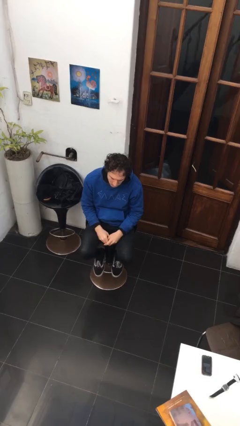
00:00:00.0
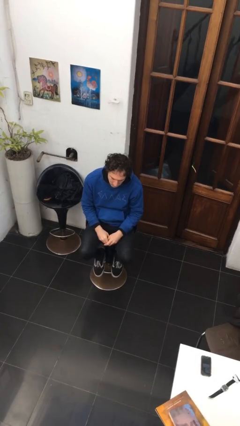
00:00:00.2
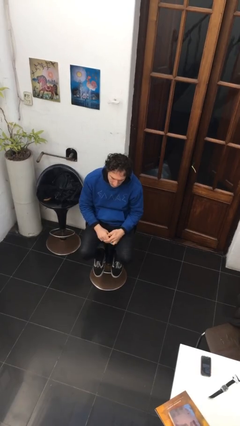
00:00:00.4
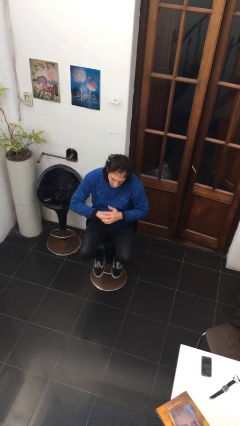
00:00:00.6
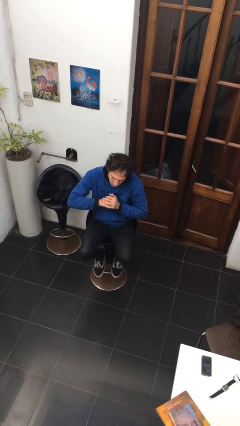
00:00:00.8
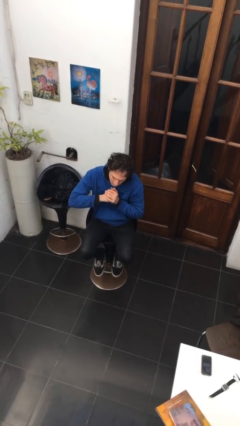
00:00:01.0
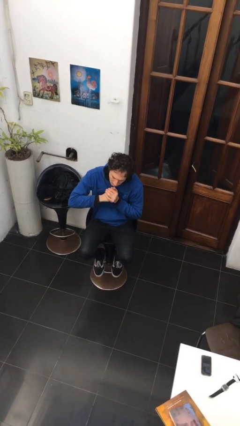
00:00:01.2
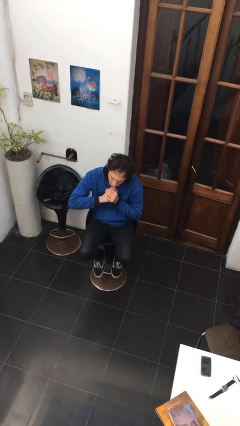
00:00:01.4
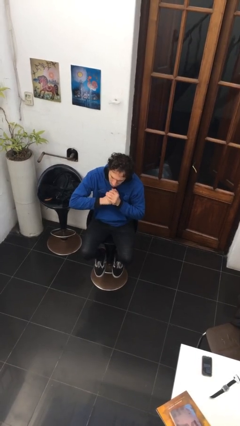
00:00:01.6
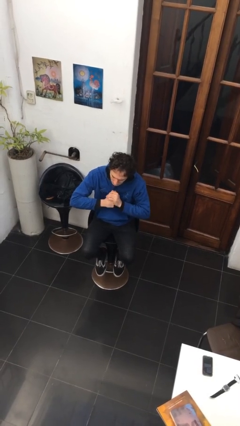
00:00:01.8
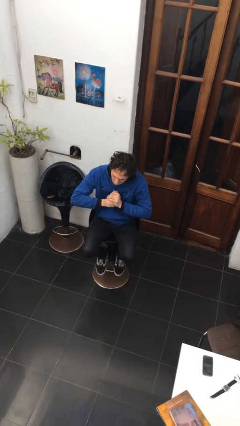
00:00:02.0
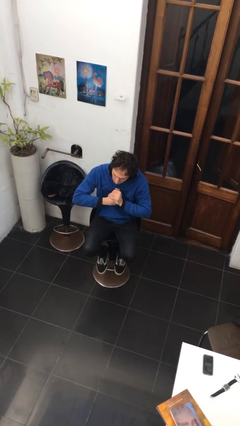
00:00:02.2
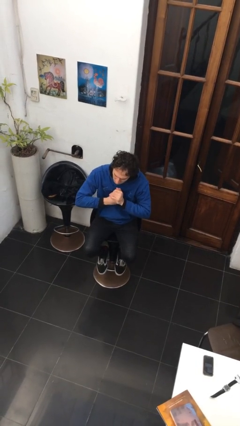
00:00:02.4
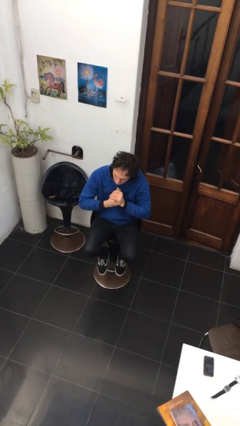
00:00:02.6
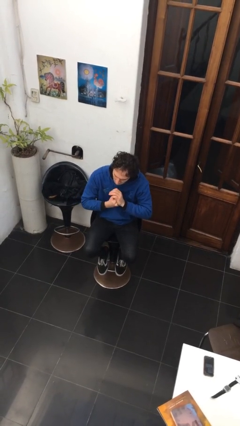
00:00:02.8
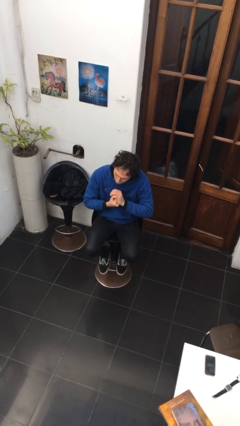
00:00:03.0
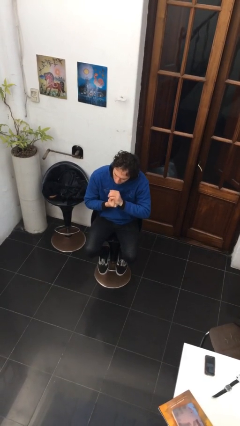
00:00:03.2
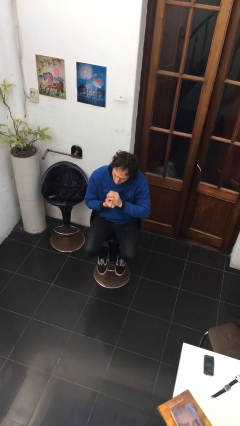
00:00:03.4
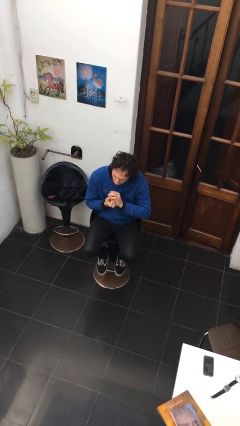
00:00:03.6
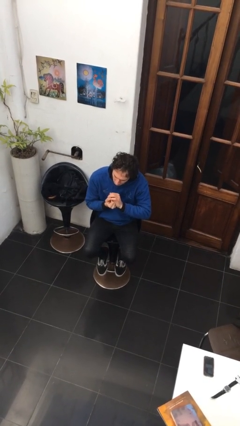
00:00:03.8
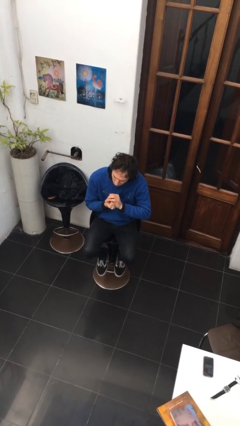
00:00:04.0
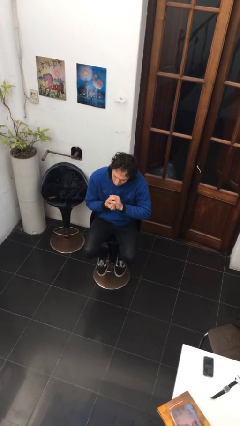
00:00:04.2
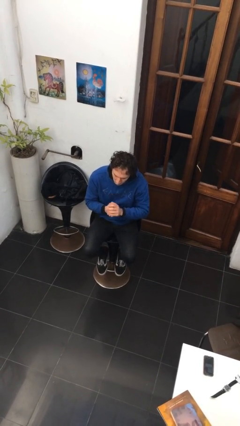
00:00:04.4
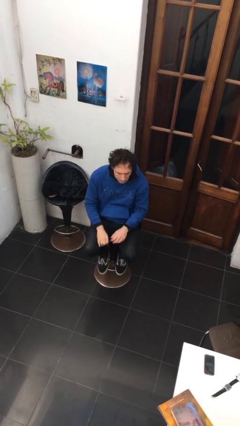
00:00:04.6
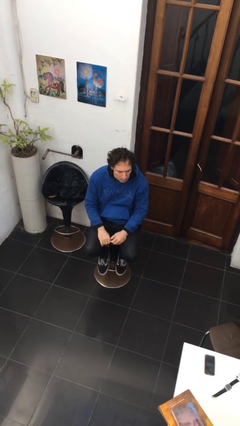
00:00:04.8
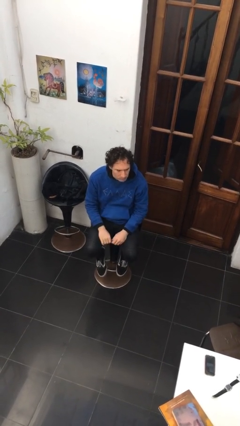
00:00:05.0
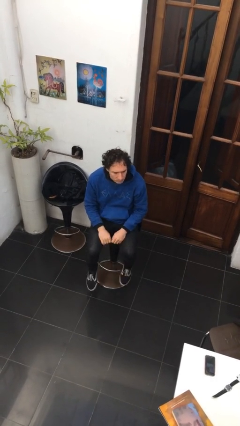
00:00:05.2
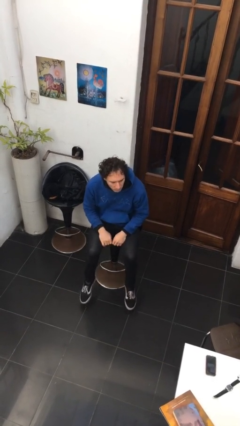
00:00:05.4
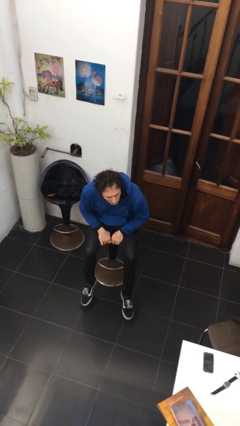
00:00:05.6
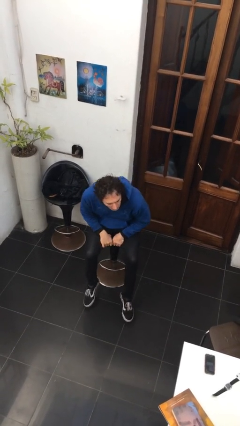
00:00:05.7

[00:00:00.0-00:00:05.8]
person cracks knuckles

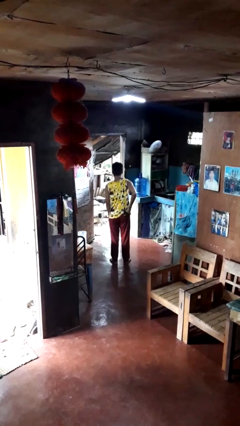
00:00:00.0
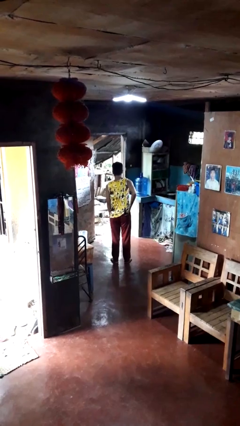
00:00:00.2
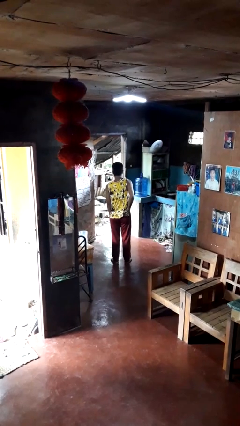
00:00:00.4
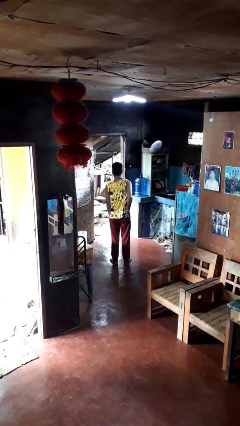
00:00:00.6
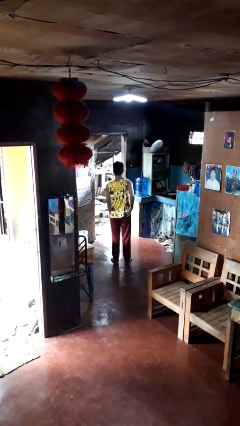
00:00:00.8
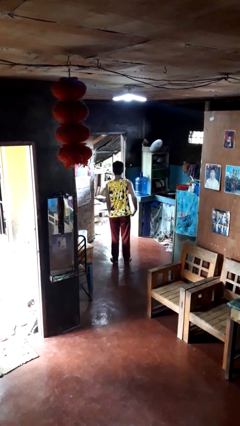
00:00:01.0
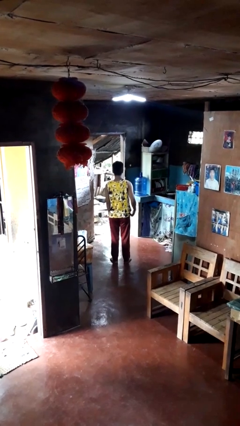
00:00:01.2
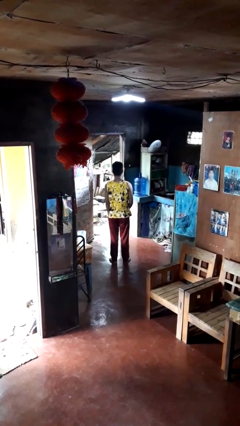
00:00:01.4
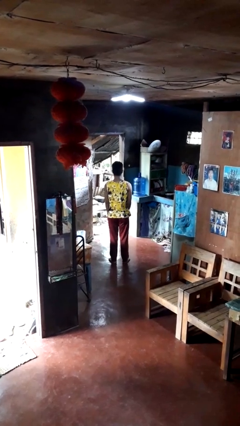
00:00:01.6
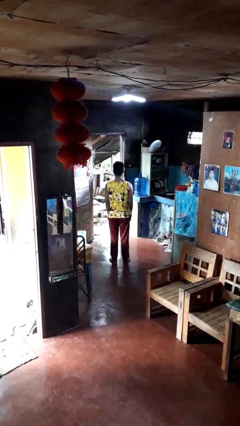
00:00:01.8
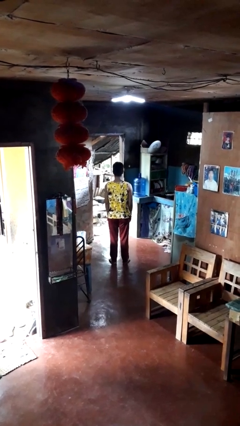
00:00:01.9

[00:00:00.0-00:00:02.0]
person puts phone into pocket

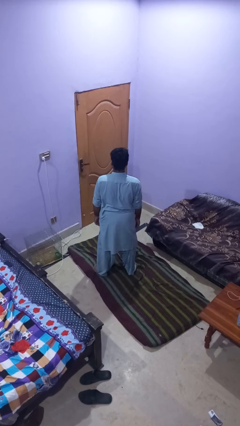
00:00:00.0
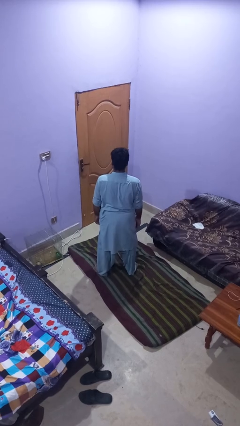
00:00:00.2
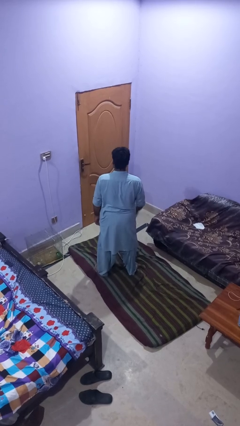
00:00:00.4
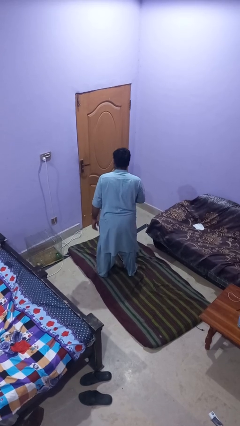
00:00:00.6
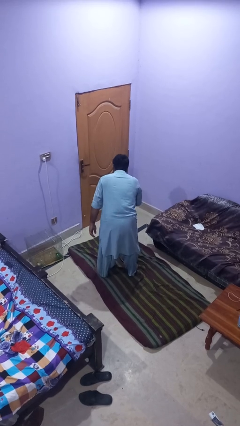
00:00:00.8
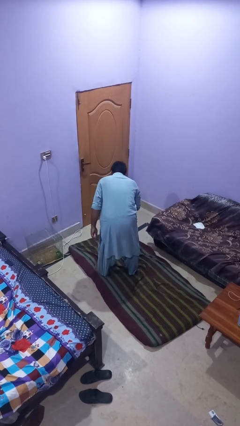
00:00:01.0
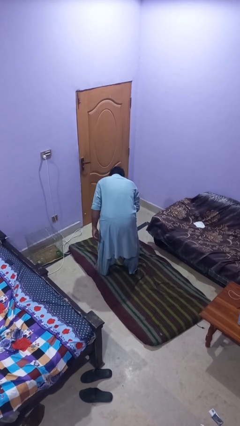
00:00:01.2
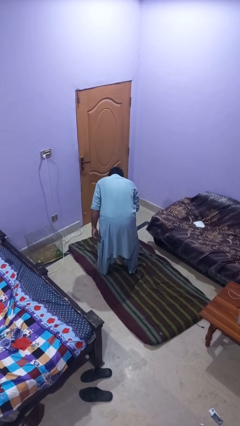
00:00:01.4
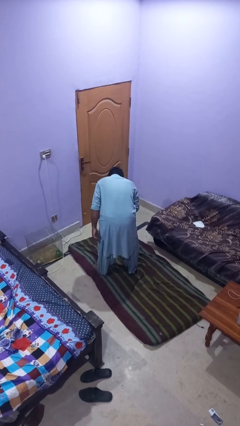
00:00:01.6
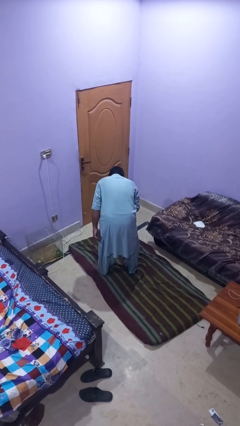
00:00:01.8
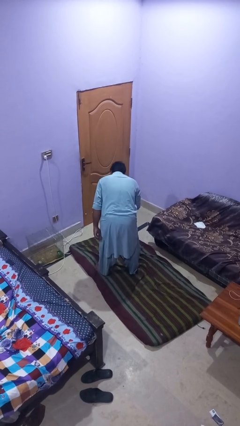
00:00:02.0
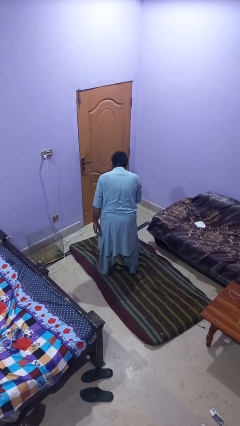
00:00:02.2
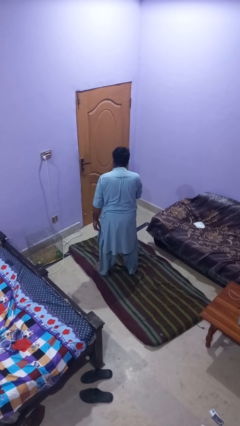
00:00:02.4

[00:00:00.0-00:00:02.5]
person bows

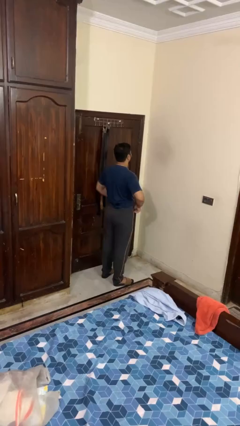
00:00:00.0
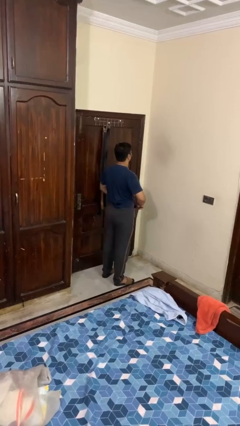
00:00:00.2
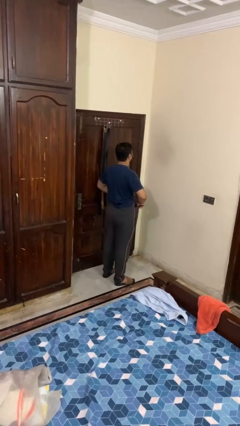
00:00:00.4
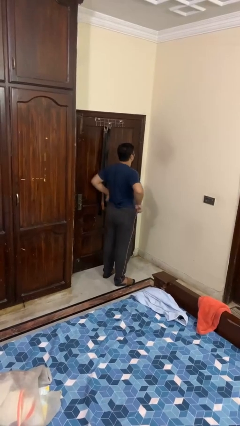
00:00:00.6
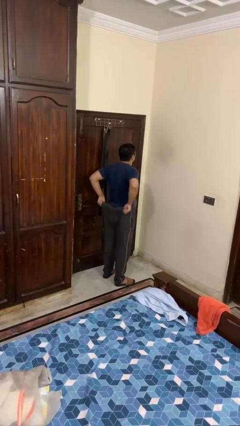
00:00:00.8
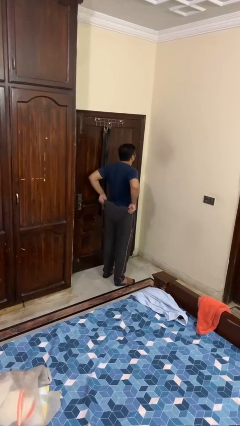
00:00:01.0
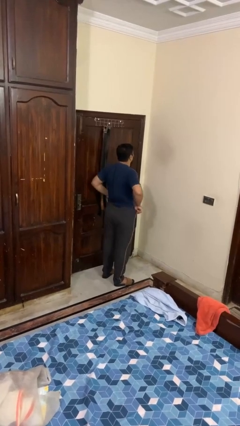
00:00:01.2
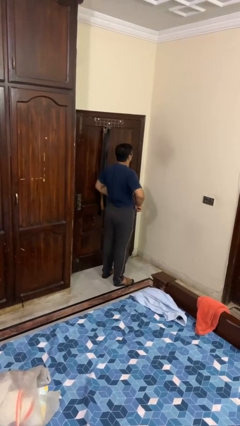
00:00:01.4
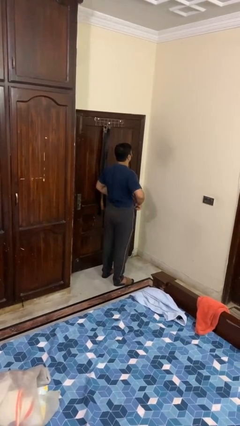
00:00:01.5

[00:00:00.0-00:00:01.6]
person hikes up pants

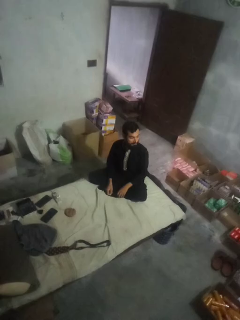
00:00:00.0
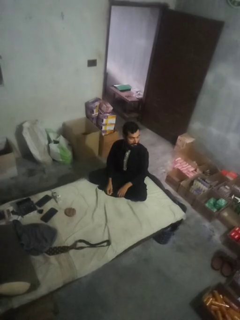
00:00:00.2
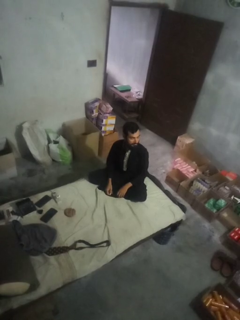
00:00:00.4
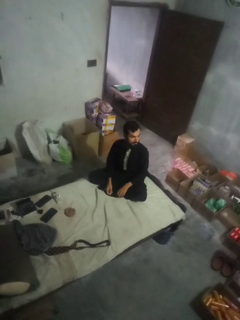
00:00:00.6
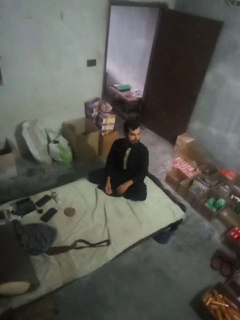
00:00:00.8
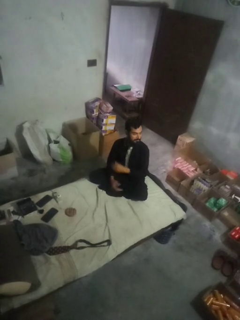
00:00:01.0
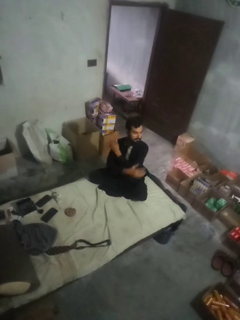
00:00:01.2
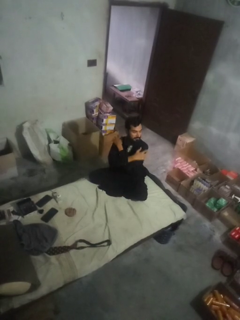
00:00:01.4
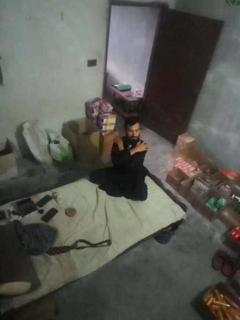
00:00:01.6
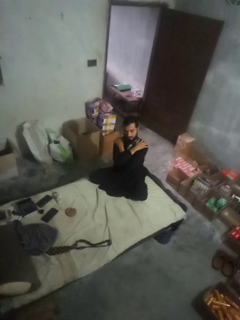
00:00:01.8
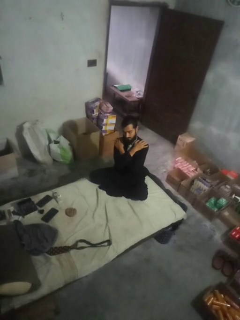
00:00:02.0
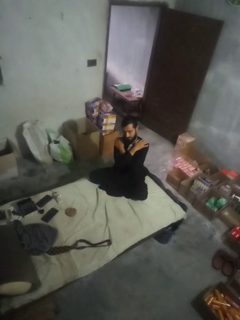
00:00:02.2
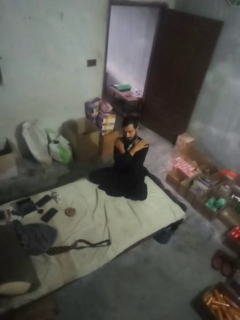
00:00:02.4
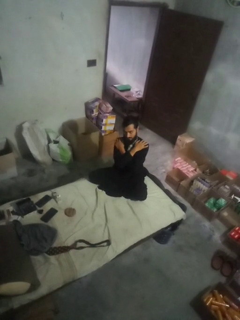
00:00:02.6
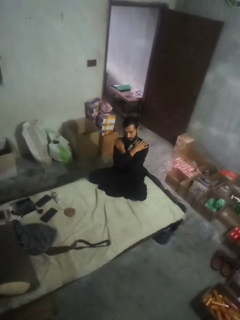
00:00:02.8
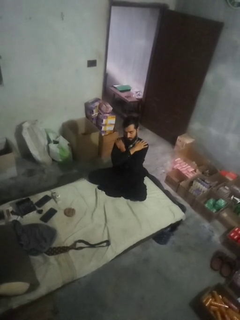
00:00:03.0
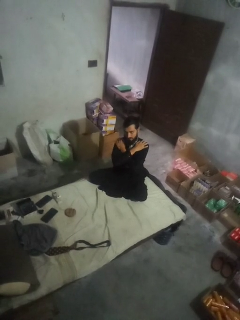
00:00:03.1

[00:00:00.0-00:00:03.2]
person gestures arms x

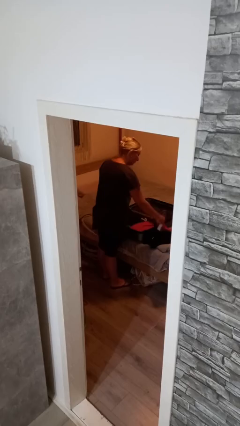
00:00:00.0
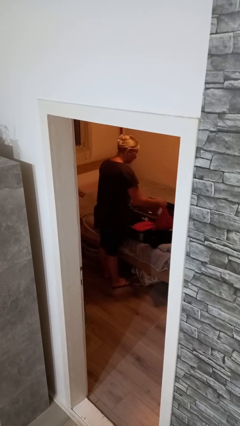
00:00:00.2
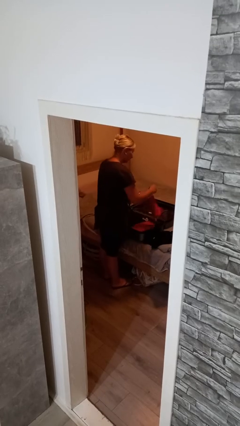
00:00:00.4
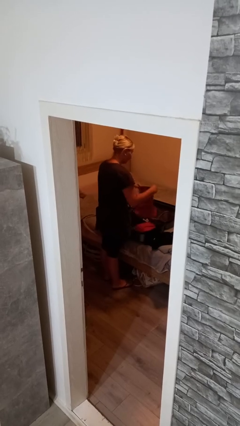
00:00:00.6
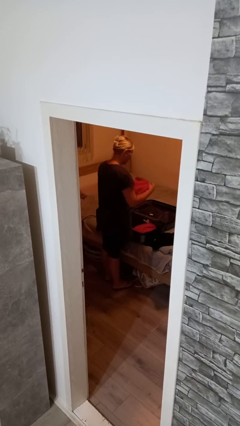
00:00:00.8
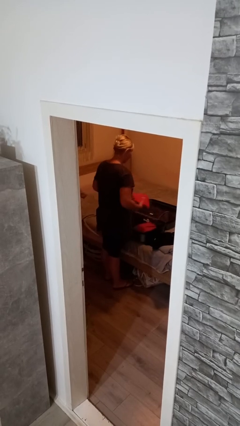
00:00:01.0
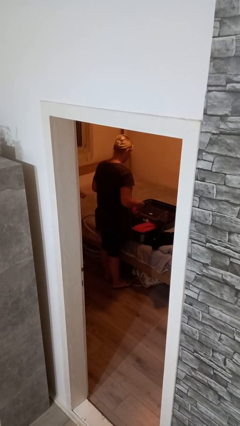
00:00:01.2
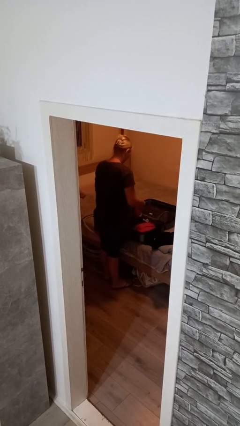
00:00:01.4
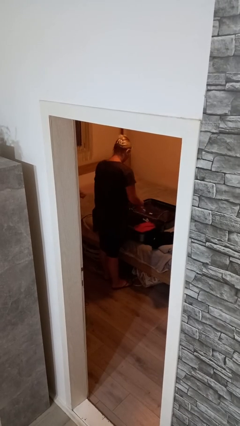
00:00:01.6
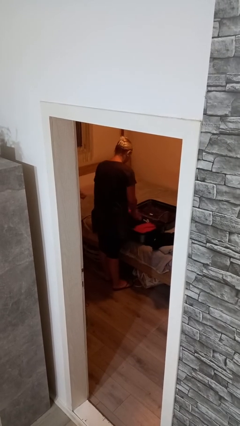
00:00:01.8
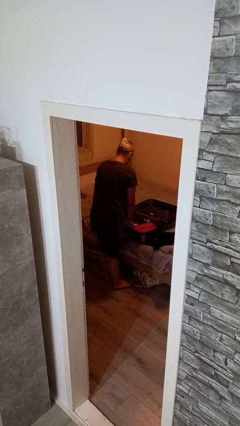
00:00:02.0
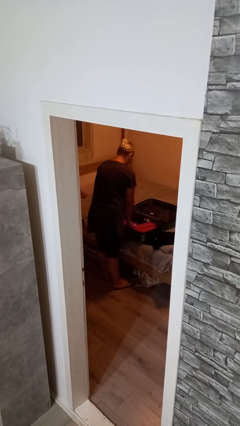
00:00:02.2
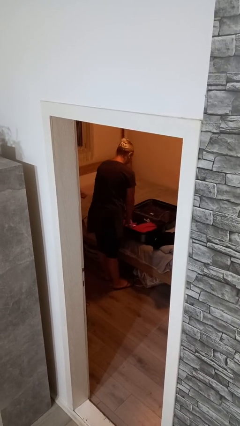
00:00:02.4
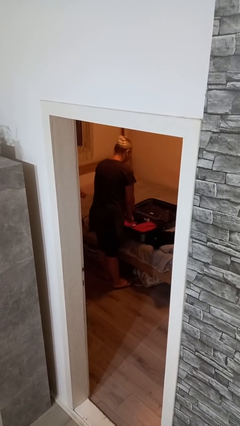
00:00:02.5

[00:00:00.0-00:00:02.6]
person loads clothes into suitcase

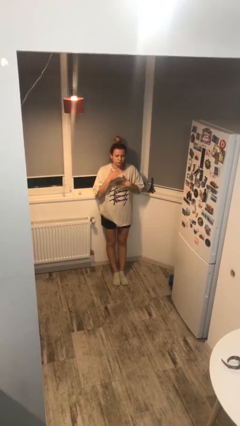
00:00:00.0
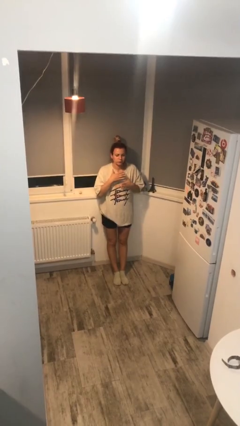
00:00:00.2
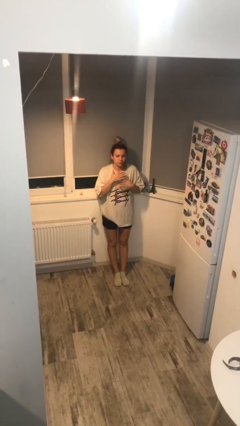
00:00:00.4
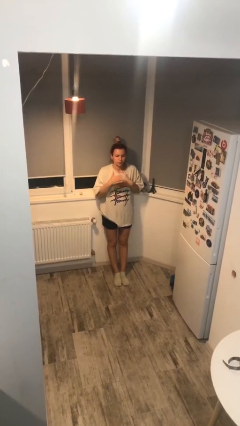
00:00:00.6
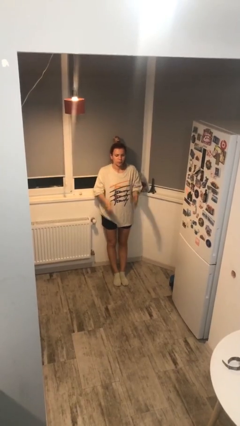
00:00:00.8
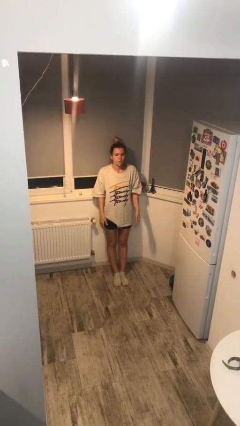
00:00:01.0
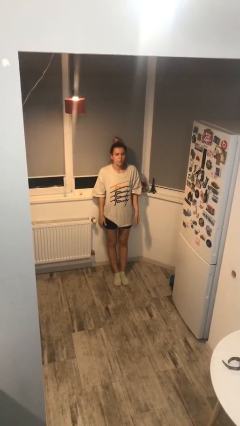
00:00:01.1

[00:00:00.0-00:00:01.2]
person drums on chest
